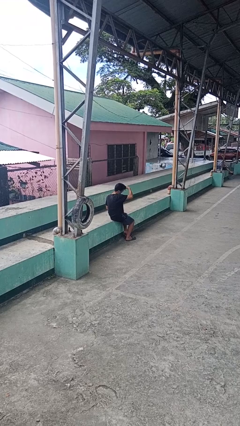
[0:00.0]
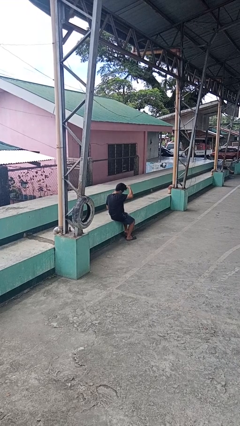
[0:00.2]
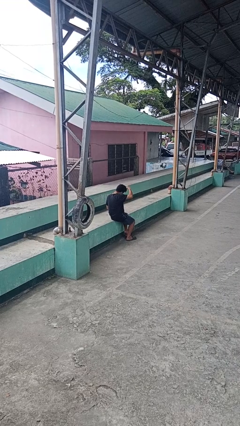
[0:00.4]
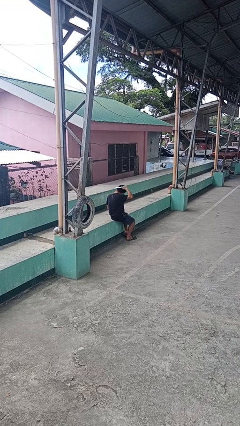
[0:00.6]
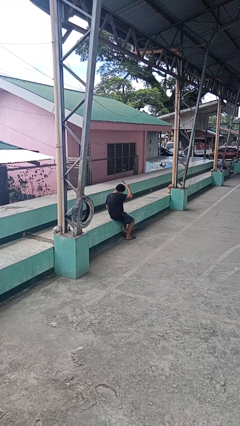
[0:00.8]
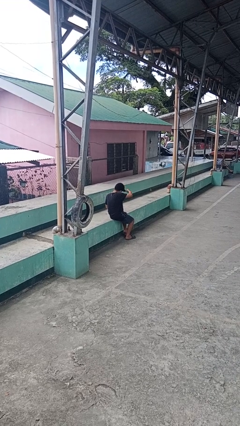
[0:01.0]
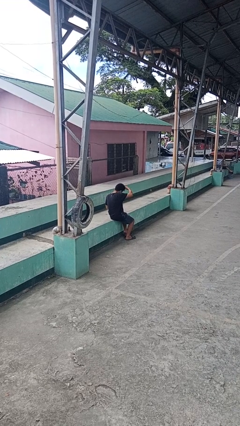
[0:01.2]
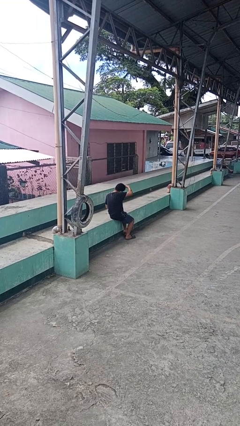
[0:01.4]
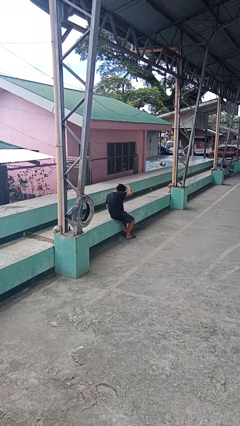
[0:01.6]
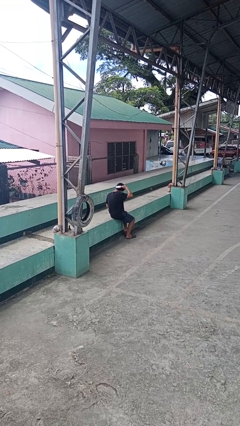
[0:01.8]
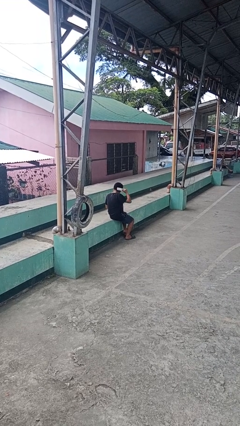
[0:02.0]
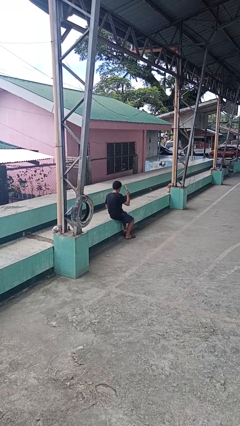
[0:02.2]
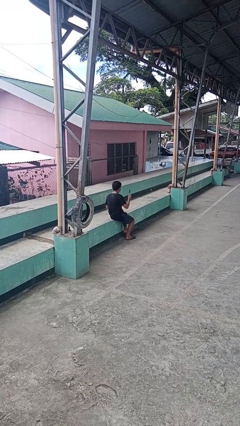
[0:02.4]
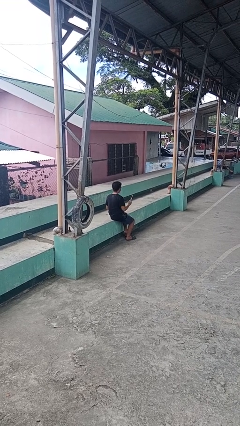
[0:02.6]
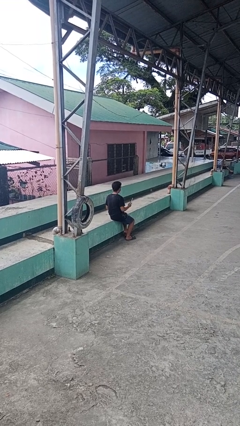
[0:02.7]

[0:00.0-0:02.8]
person brushes hair

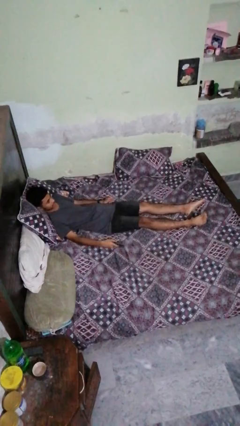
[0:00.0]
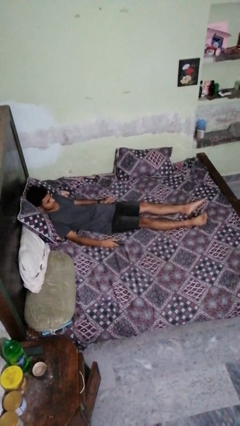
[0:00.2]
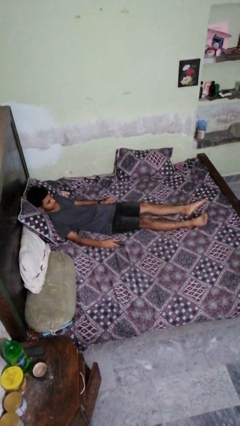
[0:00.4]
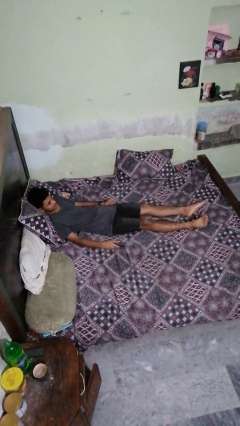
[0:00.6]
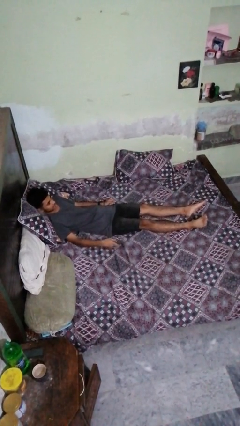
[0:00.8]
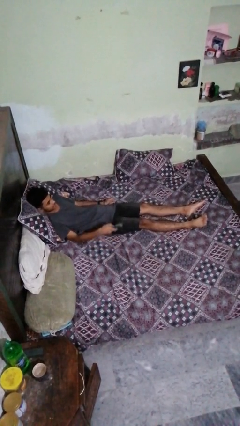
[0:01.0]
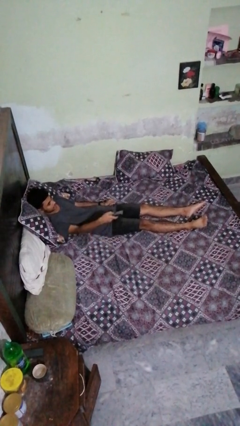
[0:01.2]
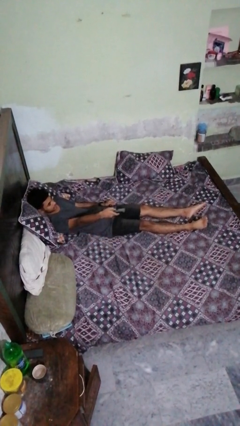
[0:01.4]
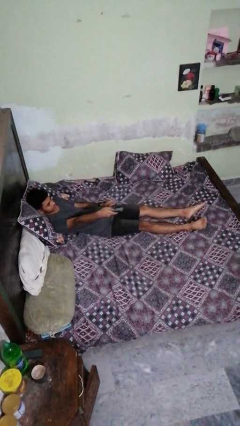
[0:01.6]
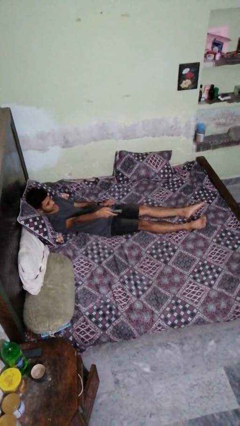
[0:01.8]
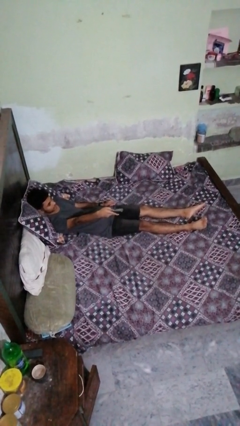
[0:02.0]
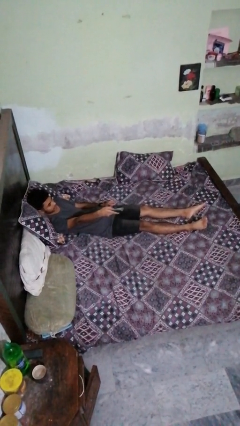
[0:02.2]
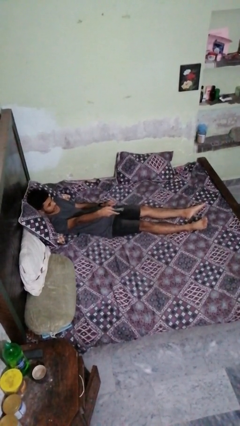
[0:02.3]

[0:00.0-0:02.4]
person uses television remote

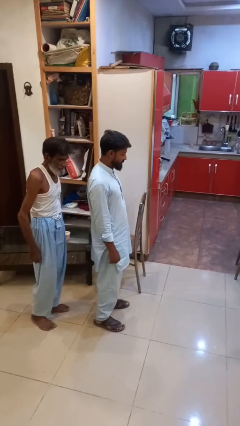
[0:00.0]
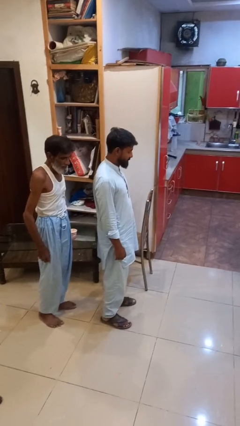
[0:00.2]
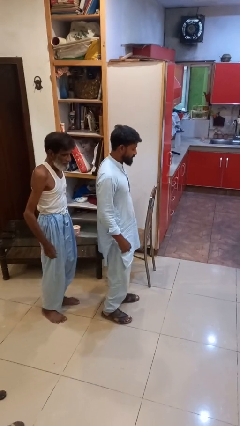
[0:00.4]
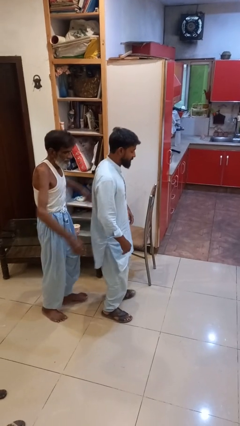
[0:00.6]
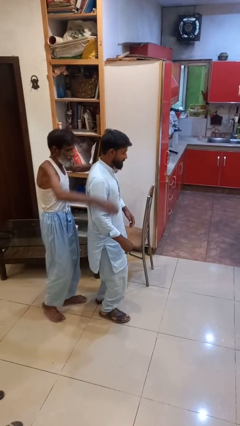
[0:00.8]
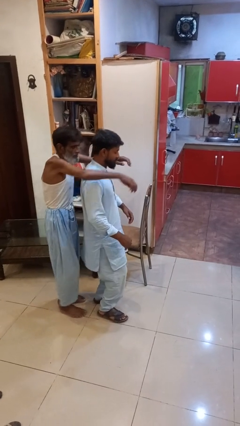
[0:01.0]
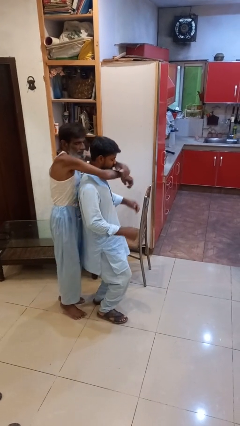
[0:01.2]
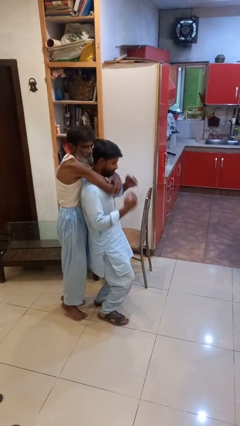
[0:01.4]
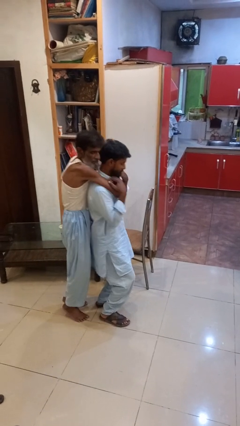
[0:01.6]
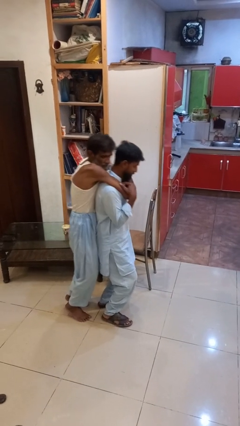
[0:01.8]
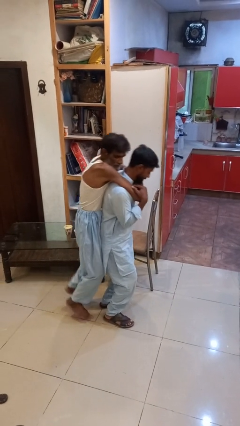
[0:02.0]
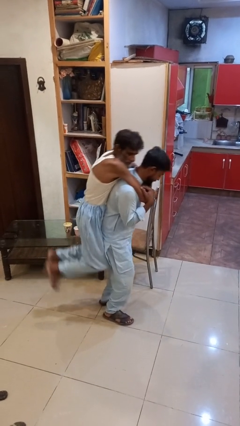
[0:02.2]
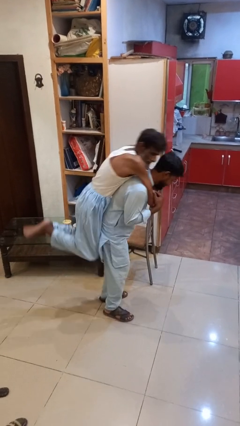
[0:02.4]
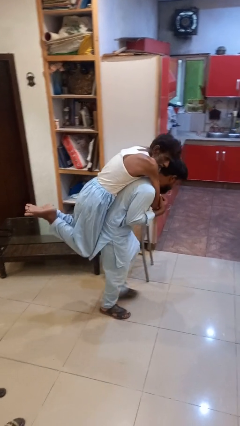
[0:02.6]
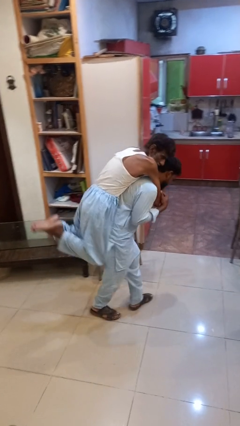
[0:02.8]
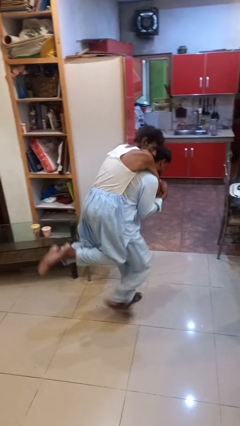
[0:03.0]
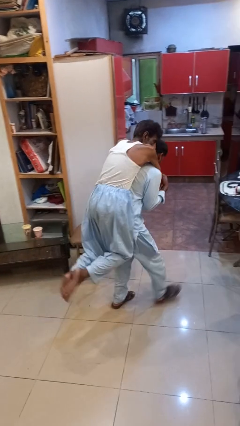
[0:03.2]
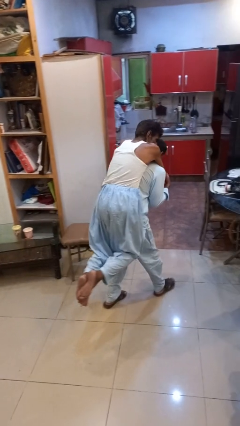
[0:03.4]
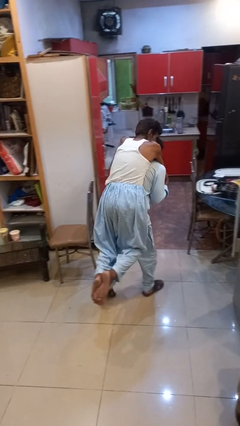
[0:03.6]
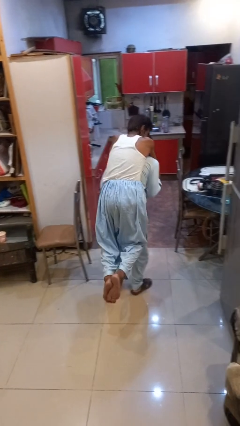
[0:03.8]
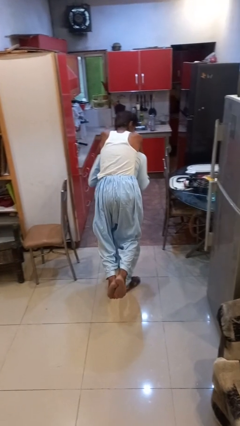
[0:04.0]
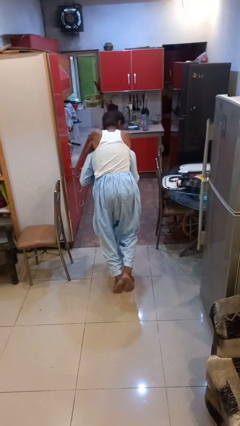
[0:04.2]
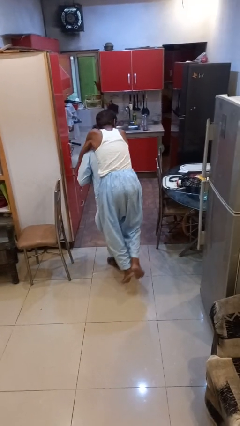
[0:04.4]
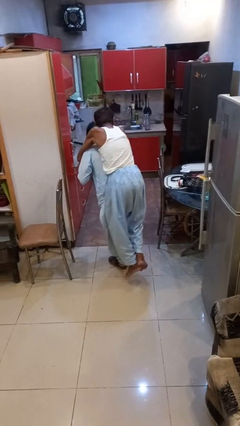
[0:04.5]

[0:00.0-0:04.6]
person carries person over shoulder

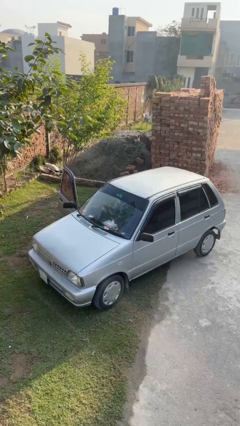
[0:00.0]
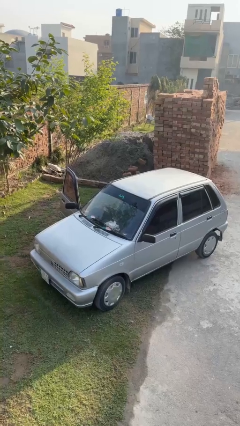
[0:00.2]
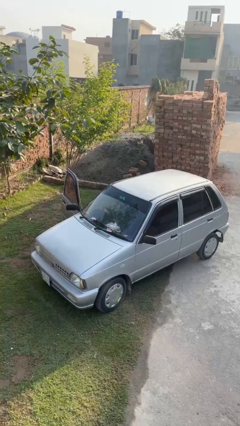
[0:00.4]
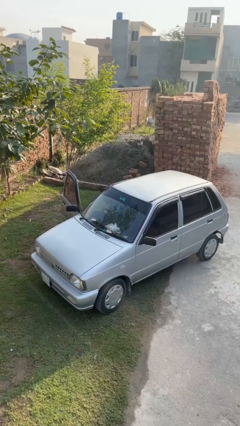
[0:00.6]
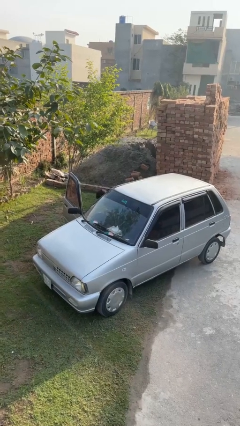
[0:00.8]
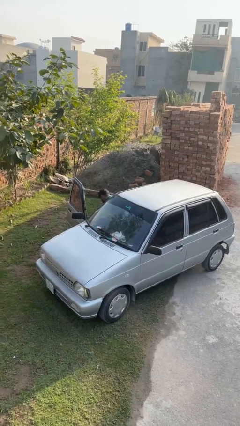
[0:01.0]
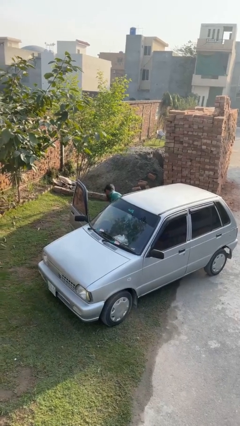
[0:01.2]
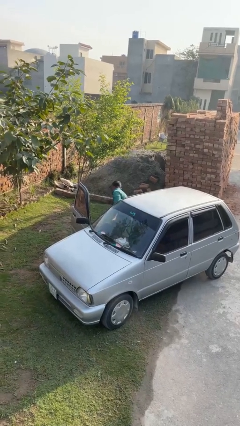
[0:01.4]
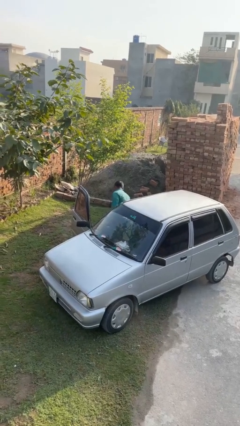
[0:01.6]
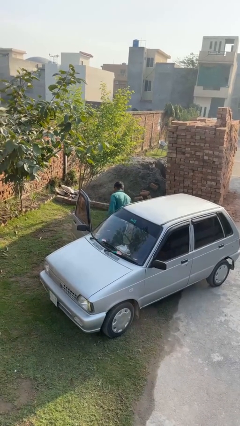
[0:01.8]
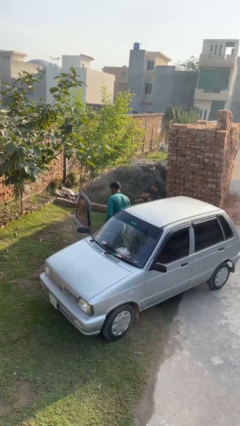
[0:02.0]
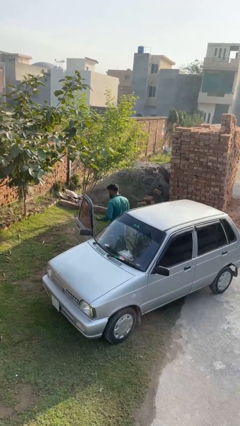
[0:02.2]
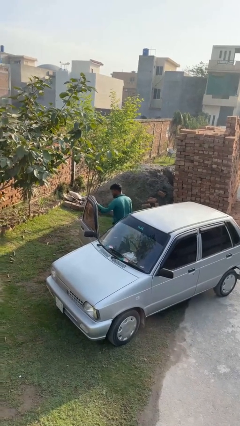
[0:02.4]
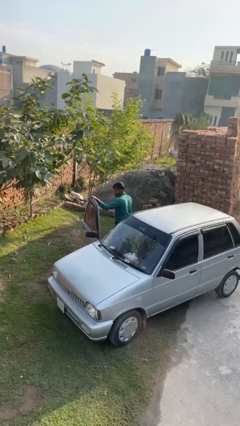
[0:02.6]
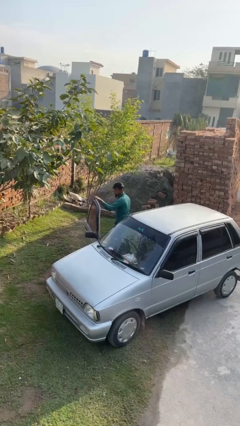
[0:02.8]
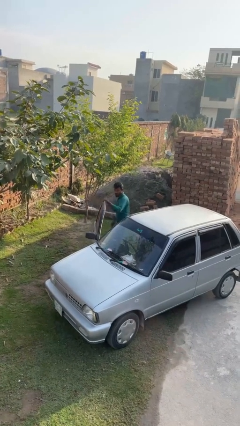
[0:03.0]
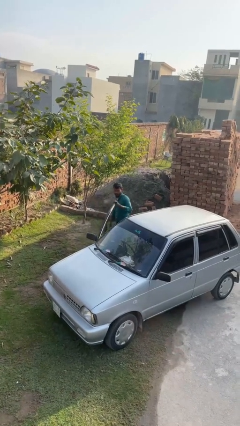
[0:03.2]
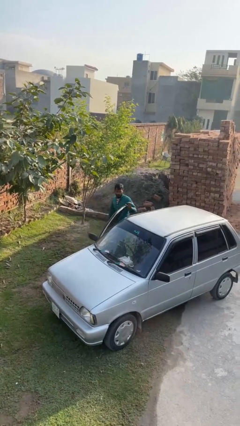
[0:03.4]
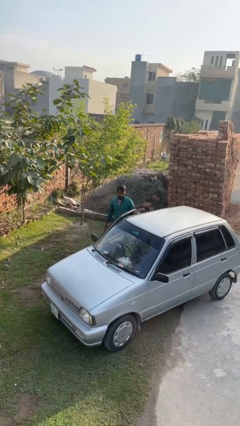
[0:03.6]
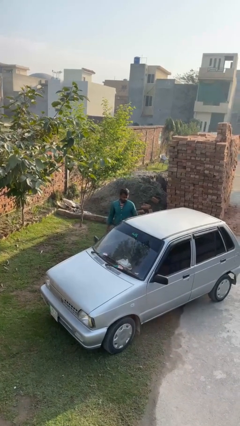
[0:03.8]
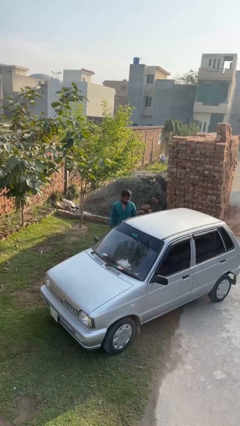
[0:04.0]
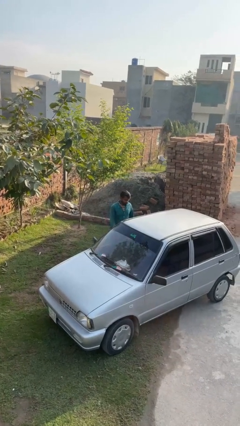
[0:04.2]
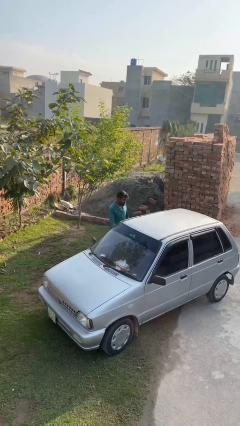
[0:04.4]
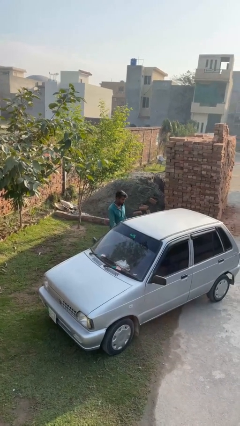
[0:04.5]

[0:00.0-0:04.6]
person exits car

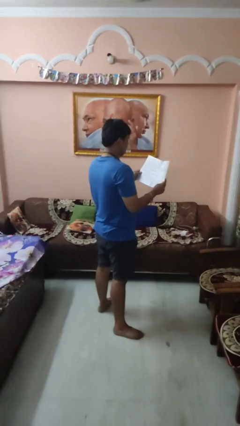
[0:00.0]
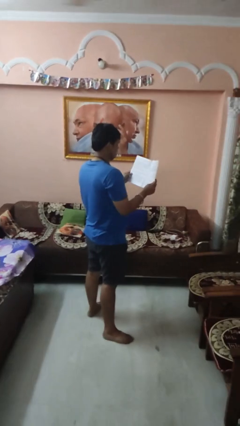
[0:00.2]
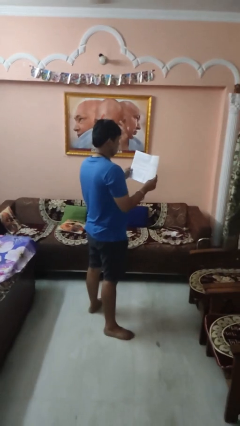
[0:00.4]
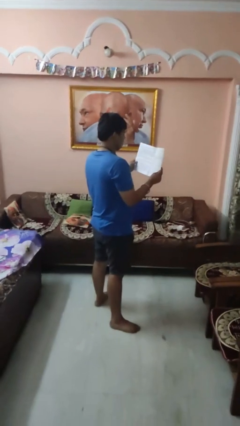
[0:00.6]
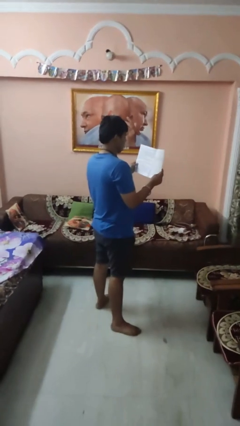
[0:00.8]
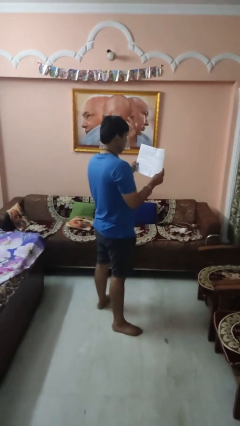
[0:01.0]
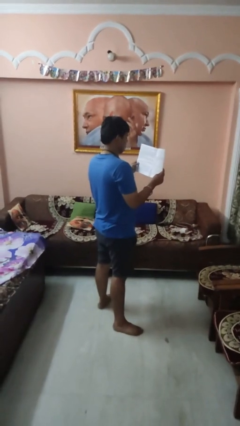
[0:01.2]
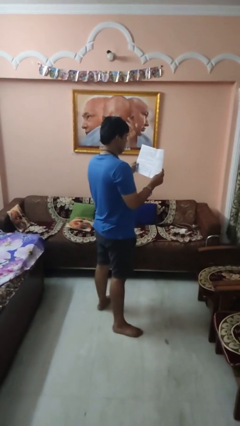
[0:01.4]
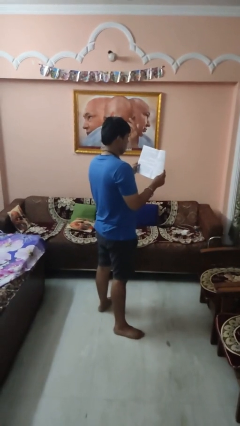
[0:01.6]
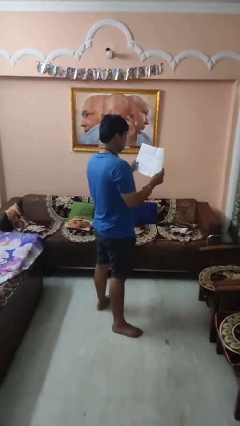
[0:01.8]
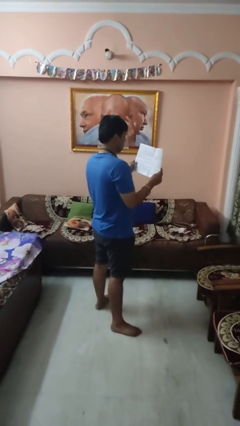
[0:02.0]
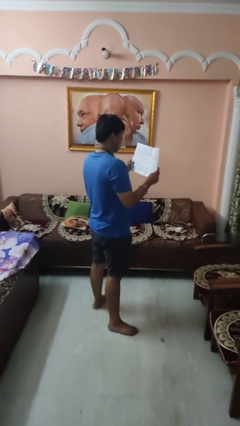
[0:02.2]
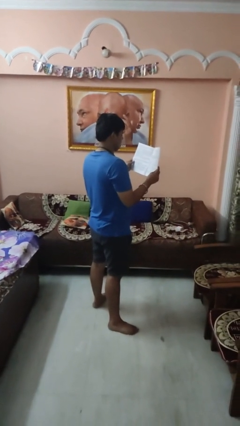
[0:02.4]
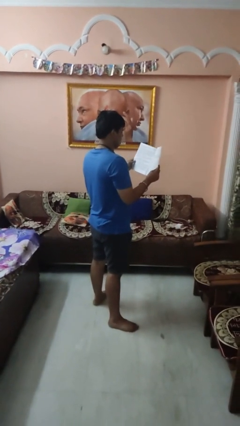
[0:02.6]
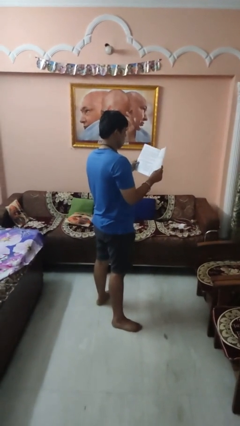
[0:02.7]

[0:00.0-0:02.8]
person reads magazine

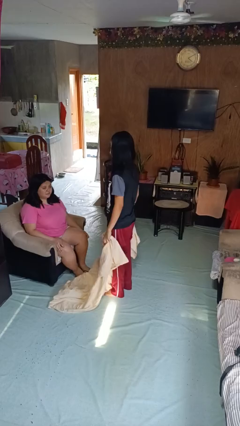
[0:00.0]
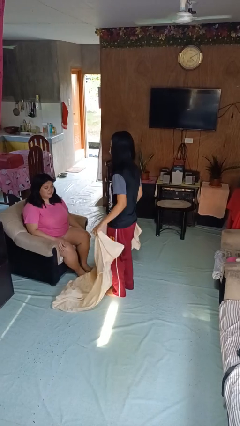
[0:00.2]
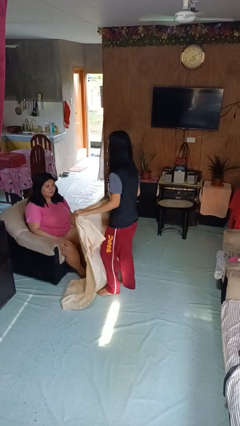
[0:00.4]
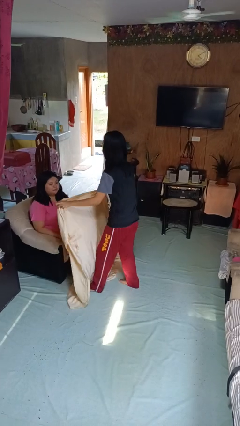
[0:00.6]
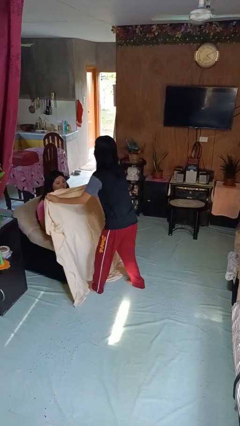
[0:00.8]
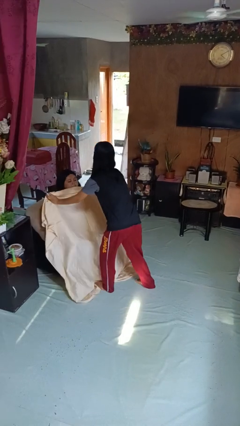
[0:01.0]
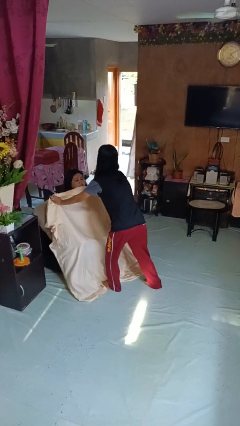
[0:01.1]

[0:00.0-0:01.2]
person covers friend with blanket
